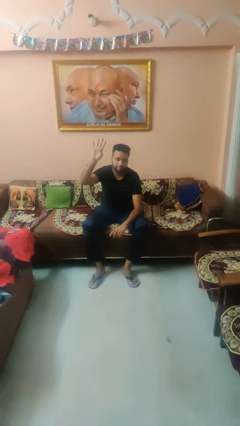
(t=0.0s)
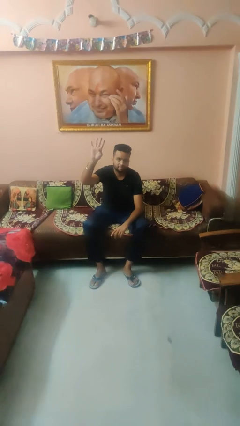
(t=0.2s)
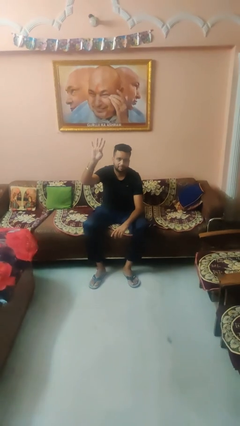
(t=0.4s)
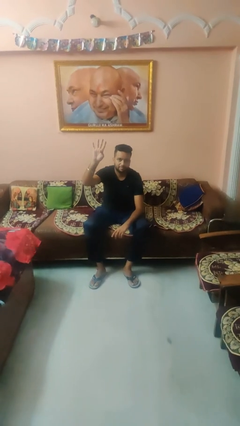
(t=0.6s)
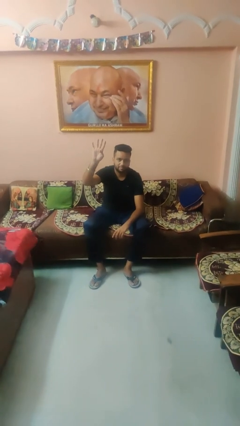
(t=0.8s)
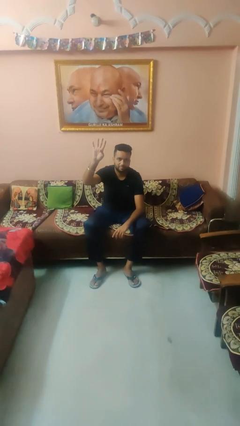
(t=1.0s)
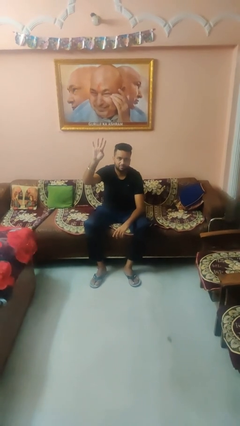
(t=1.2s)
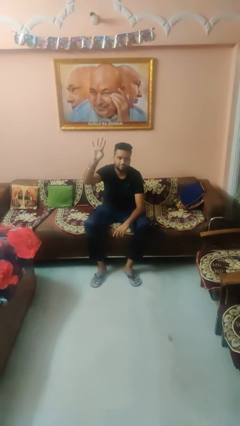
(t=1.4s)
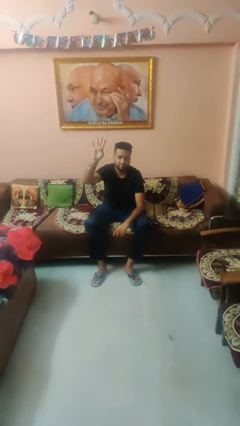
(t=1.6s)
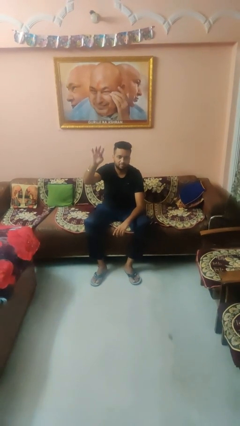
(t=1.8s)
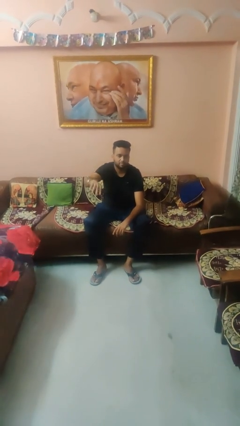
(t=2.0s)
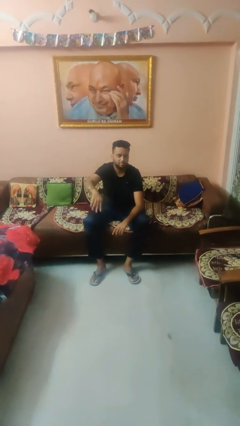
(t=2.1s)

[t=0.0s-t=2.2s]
person gestures number four

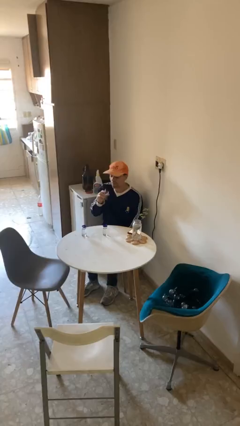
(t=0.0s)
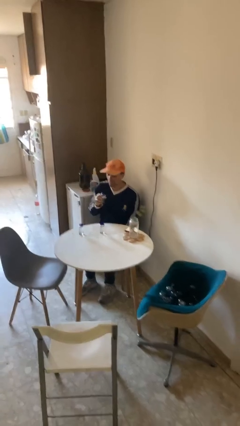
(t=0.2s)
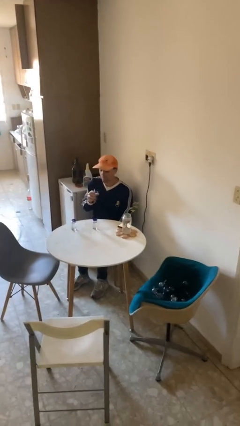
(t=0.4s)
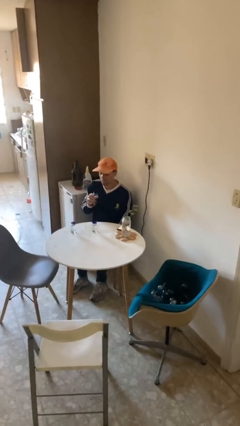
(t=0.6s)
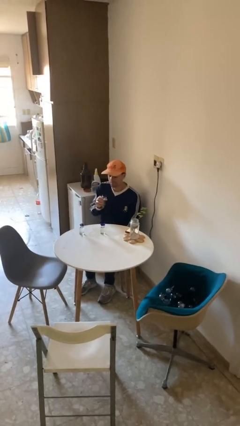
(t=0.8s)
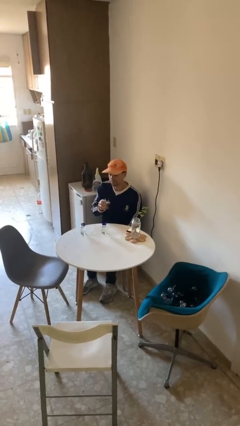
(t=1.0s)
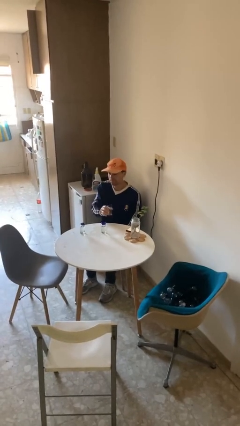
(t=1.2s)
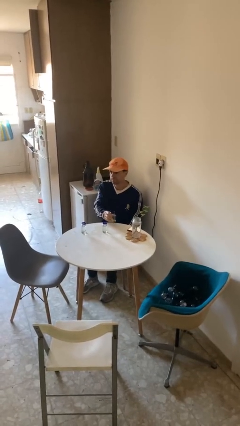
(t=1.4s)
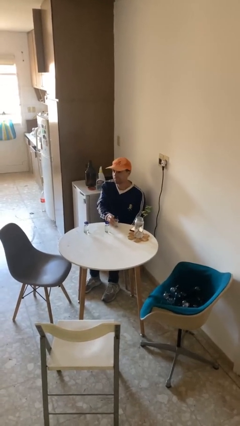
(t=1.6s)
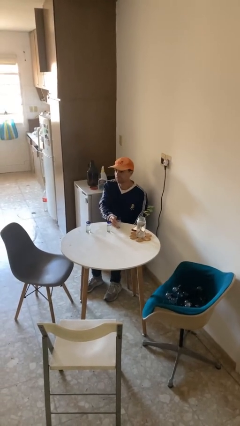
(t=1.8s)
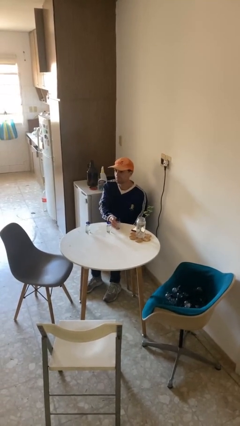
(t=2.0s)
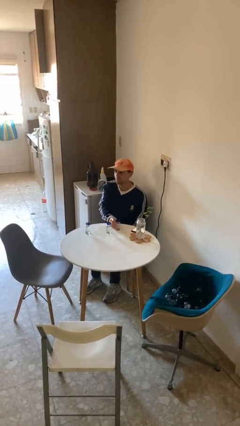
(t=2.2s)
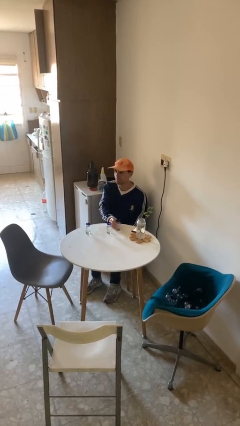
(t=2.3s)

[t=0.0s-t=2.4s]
person puts down object on table

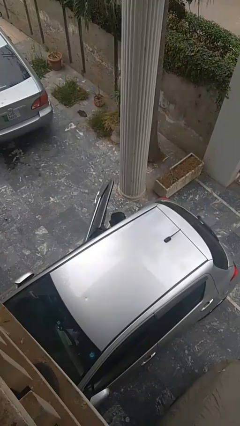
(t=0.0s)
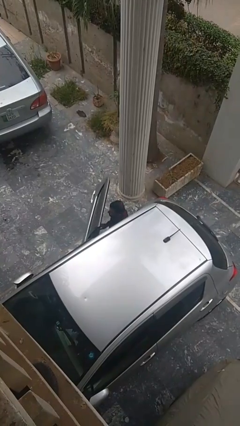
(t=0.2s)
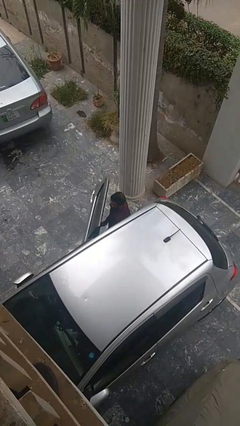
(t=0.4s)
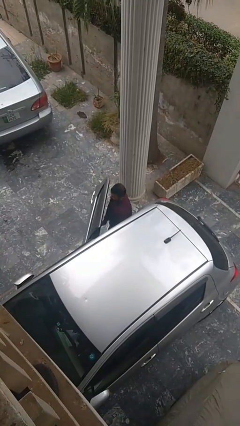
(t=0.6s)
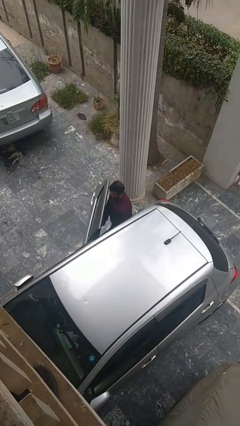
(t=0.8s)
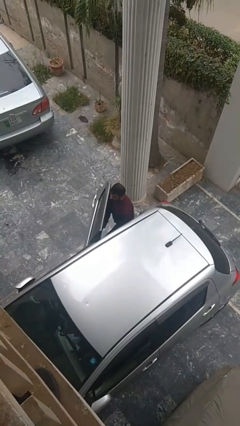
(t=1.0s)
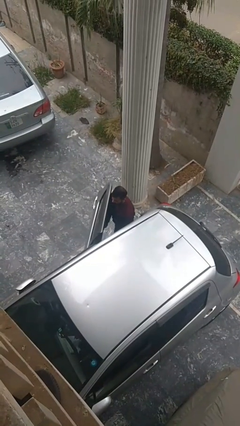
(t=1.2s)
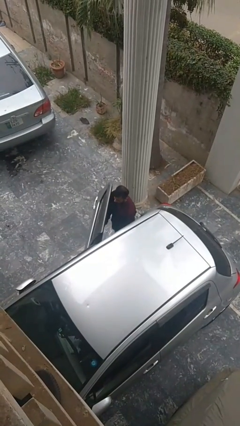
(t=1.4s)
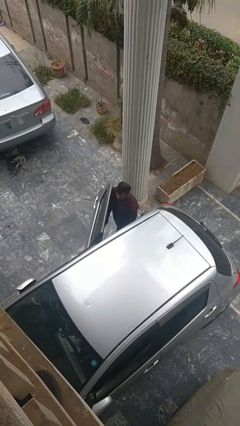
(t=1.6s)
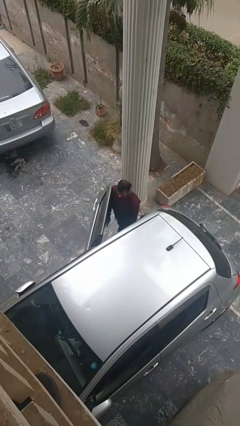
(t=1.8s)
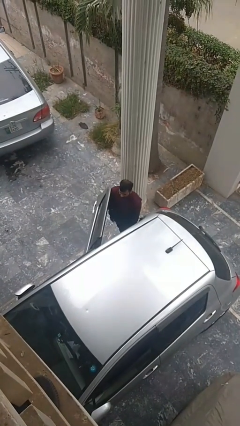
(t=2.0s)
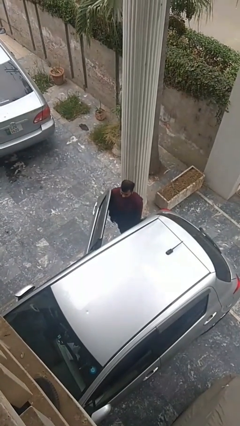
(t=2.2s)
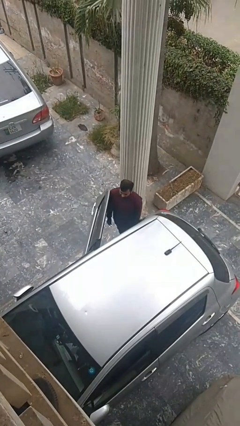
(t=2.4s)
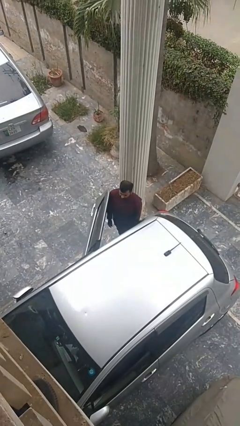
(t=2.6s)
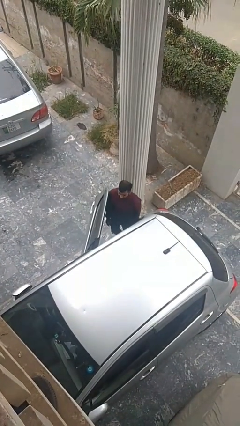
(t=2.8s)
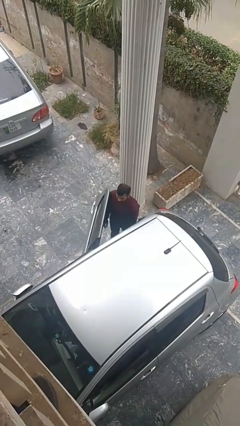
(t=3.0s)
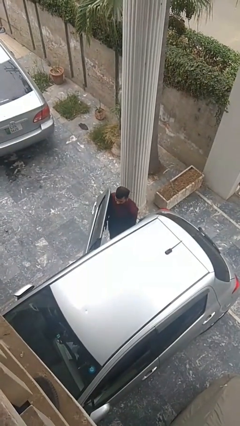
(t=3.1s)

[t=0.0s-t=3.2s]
person exits car

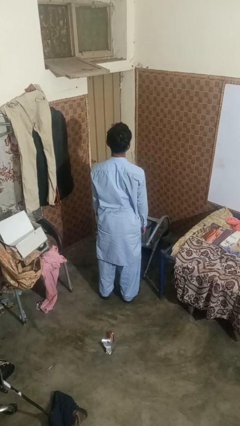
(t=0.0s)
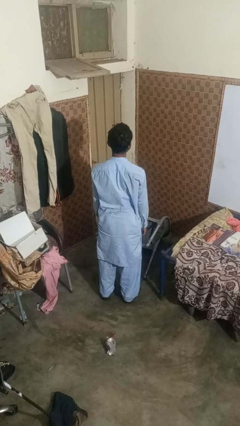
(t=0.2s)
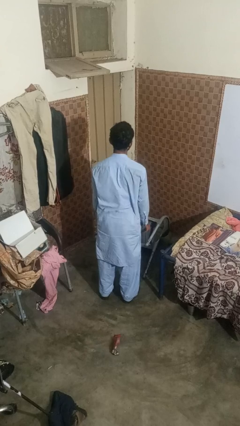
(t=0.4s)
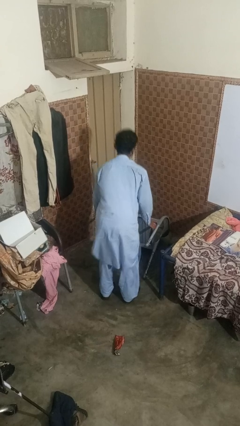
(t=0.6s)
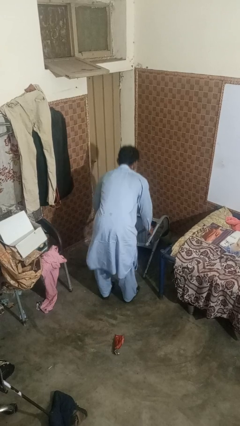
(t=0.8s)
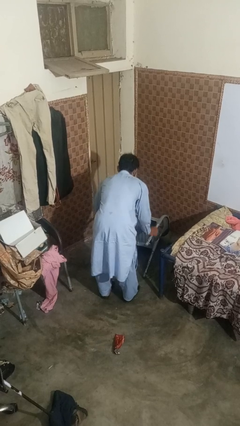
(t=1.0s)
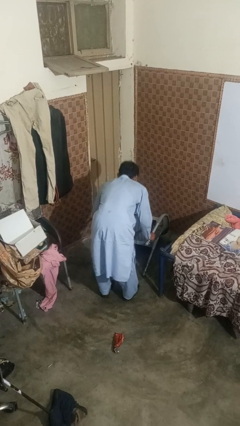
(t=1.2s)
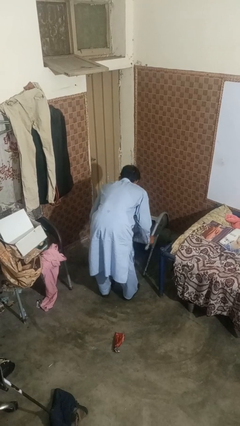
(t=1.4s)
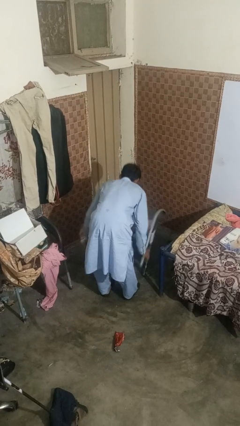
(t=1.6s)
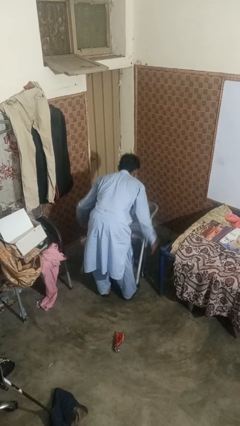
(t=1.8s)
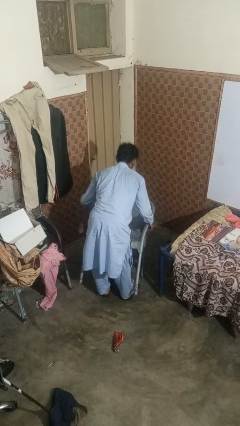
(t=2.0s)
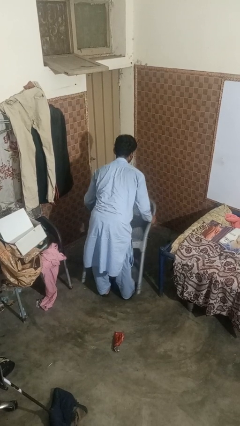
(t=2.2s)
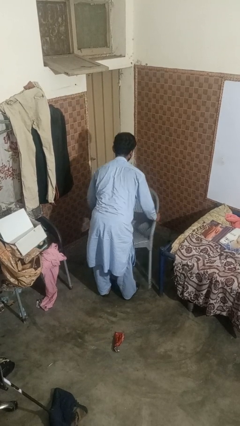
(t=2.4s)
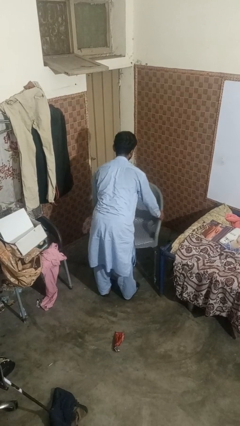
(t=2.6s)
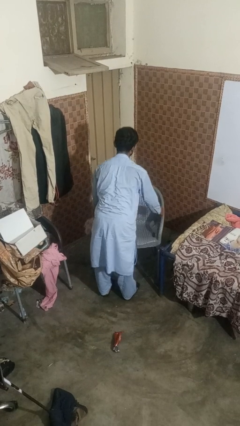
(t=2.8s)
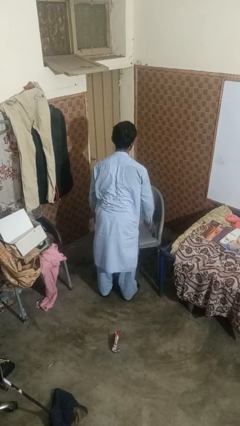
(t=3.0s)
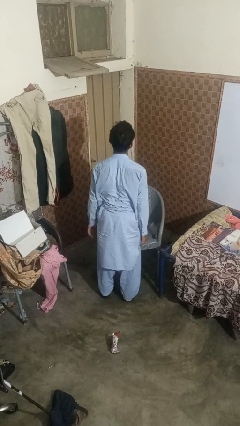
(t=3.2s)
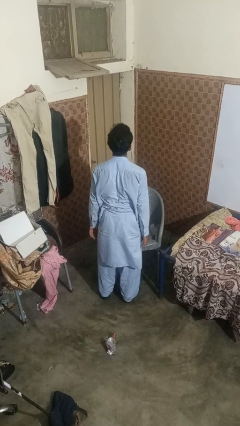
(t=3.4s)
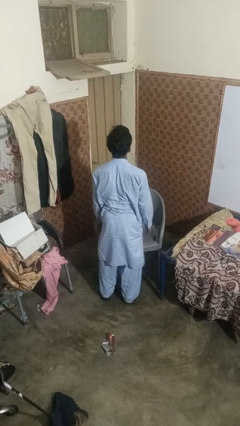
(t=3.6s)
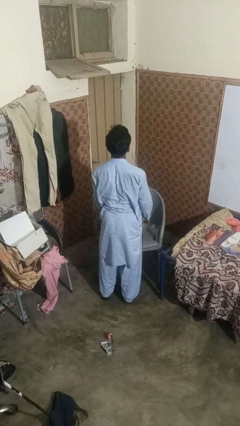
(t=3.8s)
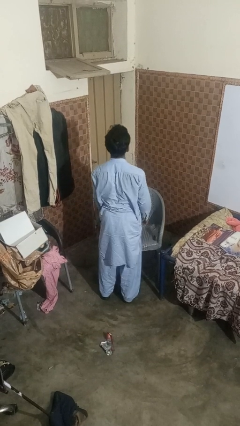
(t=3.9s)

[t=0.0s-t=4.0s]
person sets upright furniture

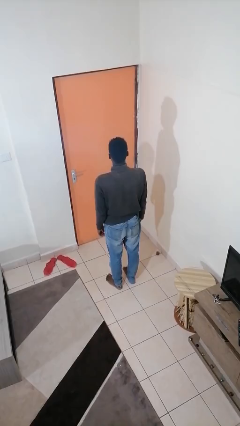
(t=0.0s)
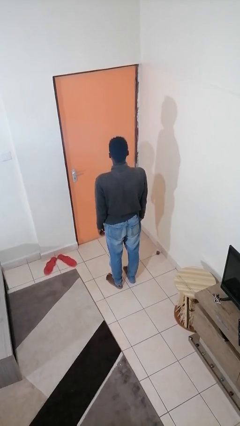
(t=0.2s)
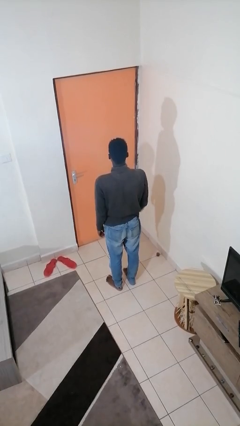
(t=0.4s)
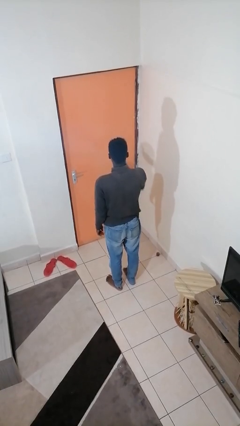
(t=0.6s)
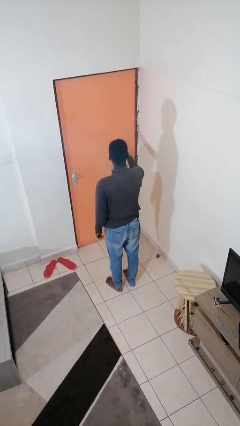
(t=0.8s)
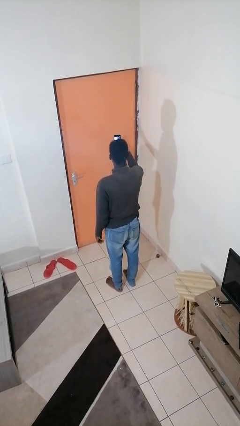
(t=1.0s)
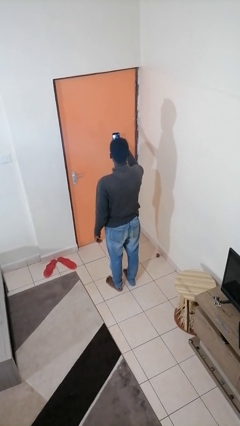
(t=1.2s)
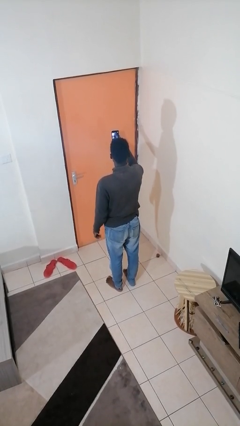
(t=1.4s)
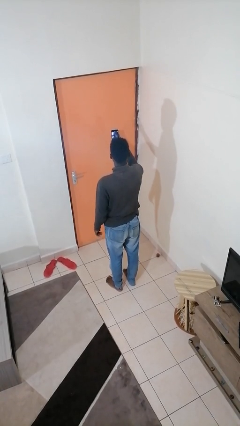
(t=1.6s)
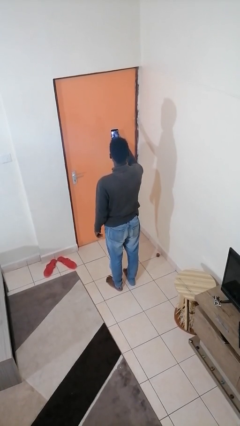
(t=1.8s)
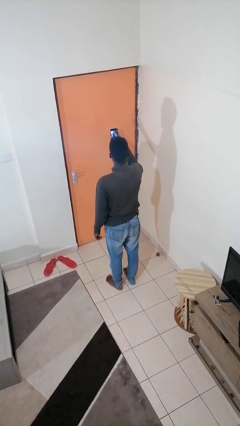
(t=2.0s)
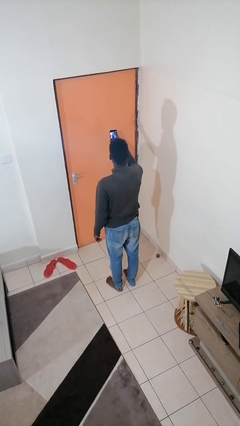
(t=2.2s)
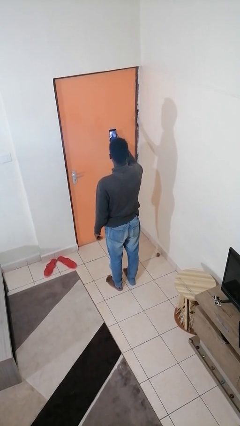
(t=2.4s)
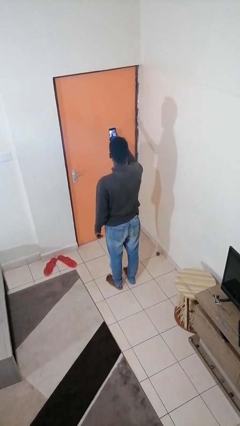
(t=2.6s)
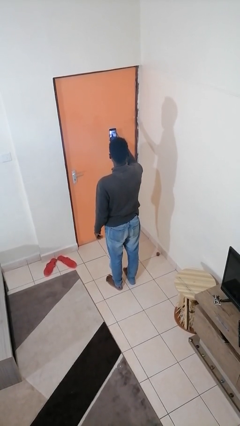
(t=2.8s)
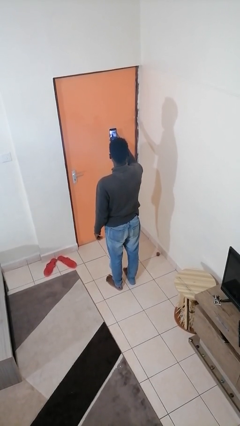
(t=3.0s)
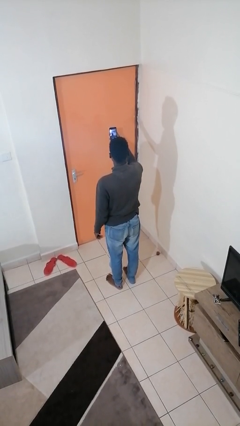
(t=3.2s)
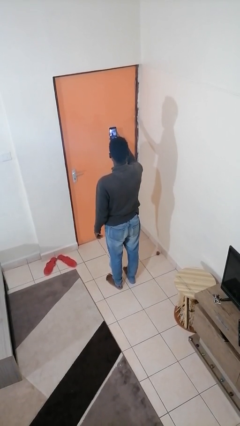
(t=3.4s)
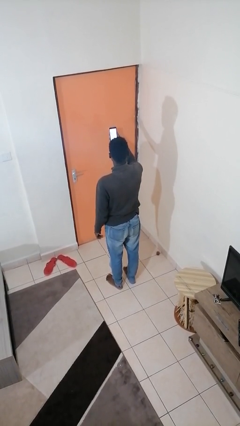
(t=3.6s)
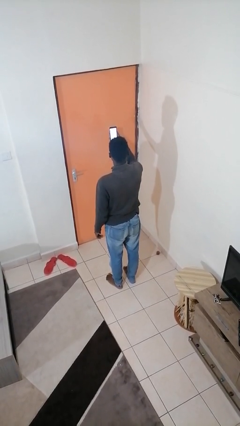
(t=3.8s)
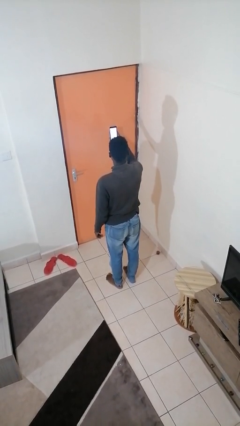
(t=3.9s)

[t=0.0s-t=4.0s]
person takes selfie

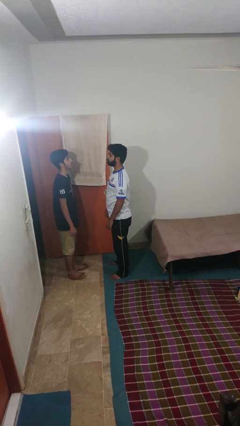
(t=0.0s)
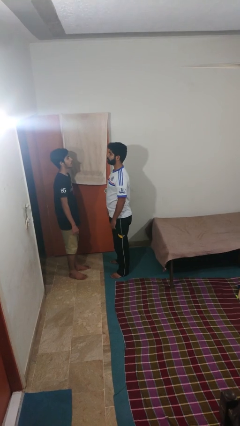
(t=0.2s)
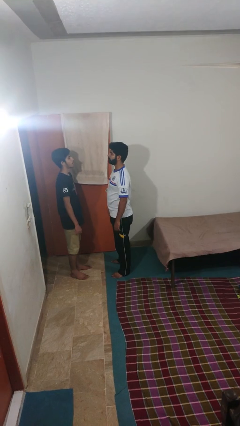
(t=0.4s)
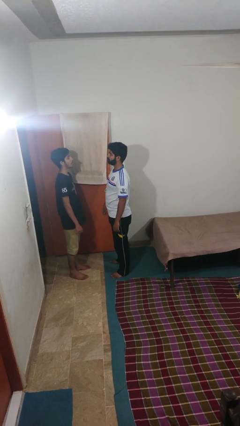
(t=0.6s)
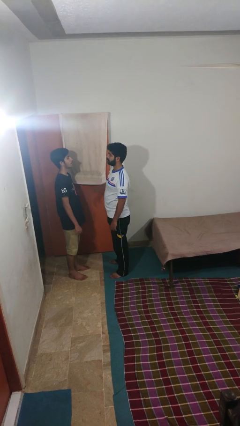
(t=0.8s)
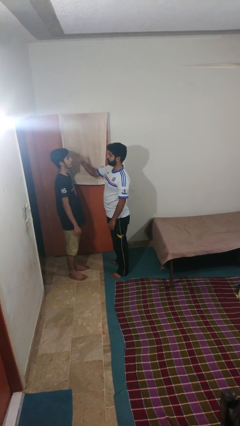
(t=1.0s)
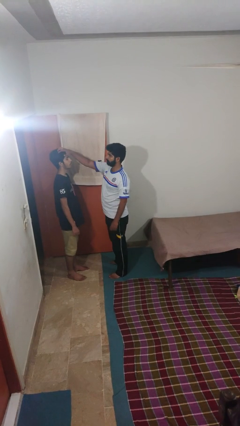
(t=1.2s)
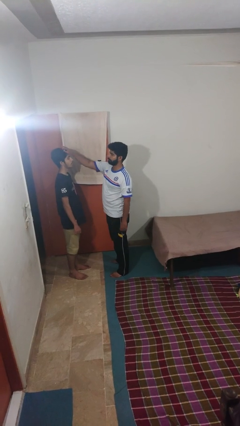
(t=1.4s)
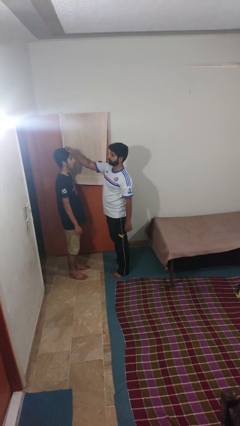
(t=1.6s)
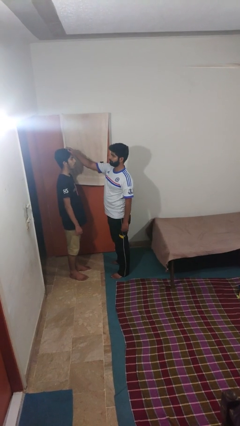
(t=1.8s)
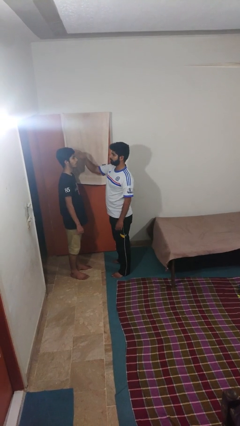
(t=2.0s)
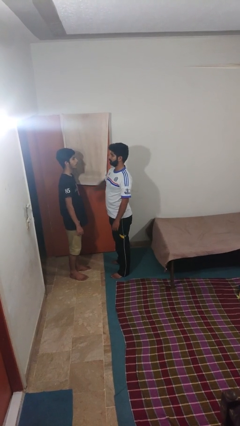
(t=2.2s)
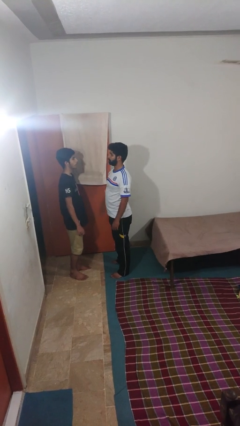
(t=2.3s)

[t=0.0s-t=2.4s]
person grabs person by hair
